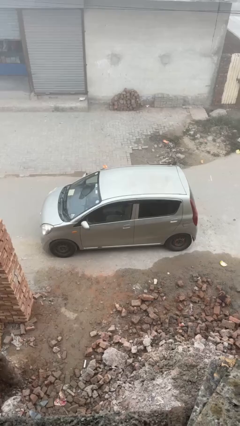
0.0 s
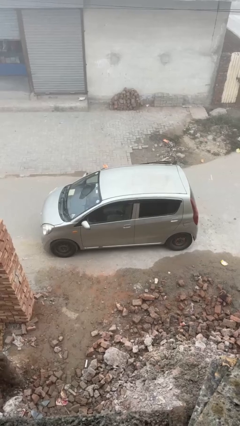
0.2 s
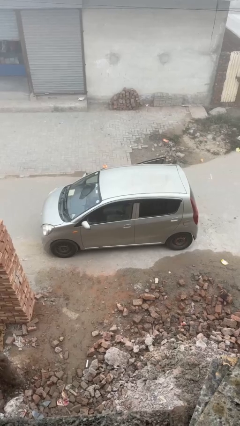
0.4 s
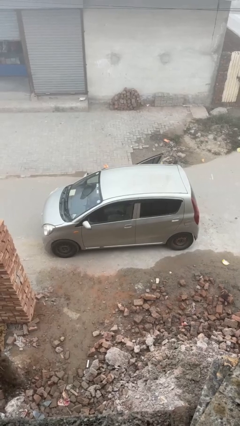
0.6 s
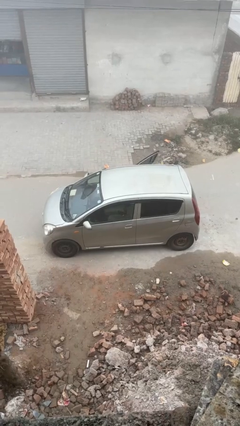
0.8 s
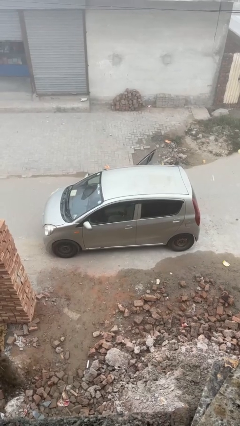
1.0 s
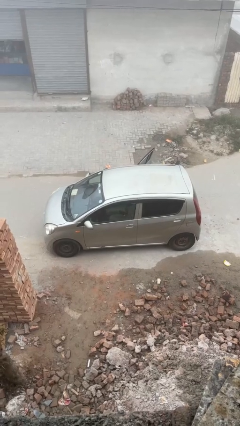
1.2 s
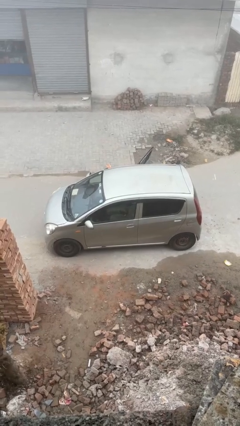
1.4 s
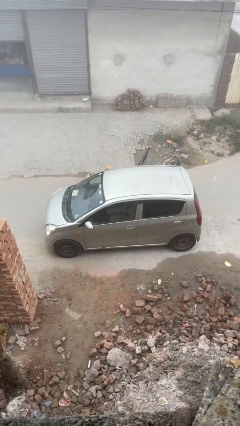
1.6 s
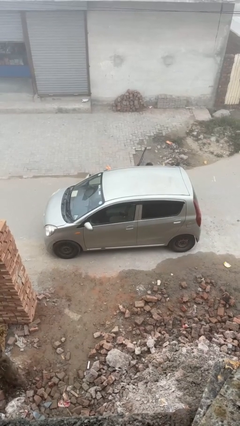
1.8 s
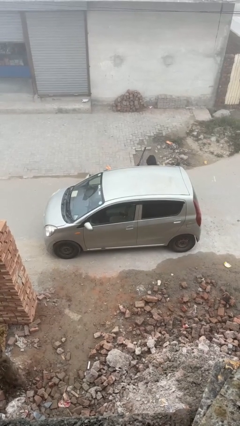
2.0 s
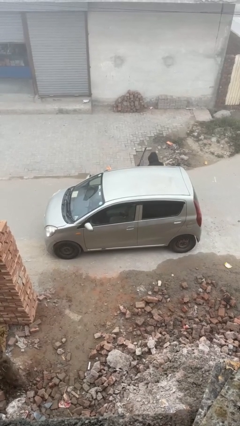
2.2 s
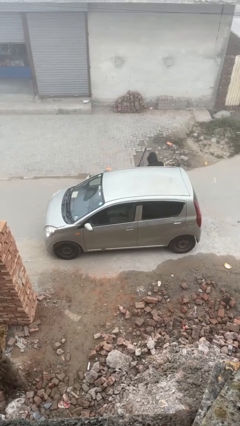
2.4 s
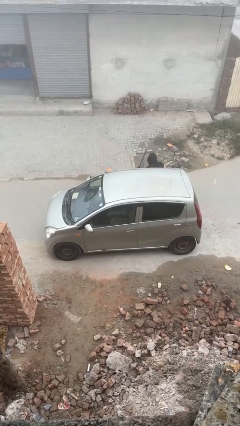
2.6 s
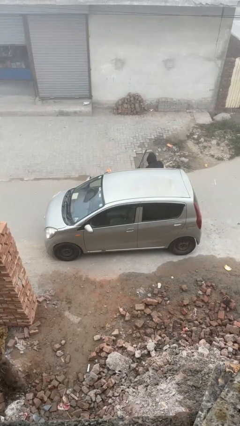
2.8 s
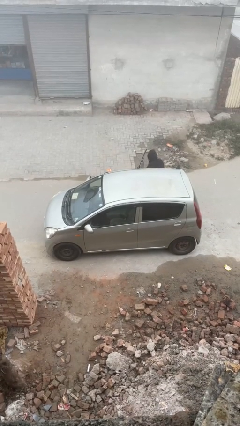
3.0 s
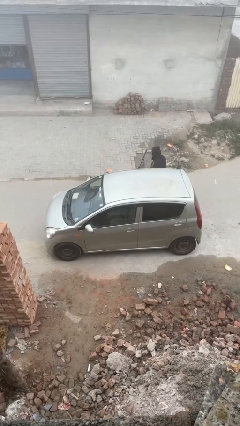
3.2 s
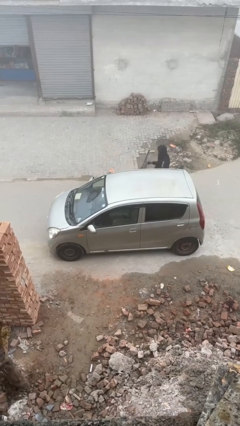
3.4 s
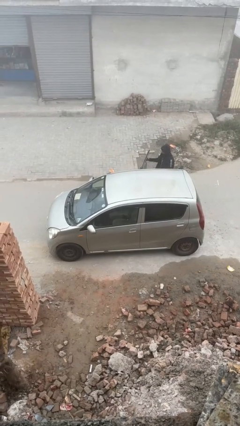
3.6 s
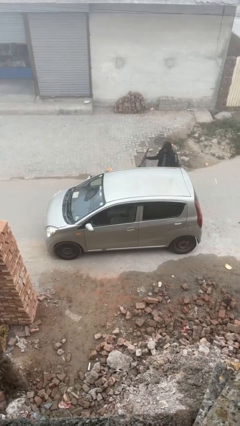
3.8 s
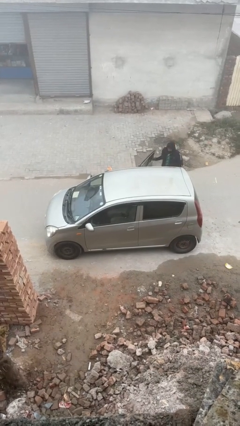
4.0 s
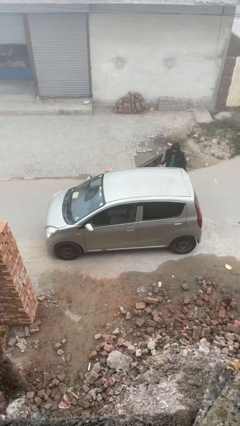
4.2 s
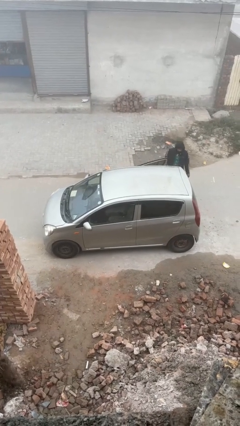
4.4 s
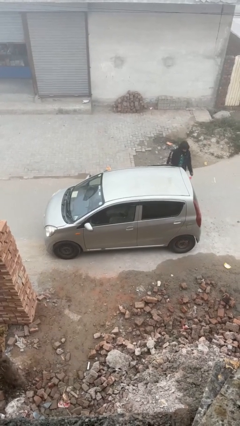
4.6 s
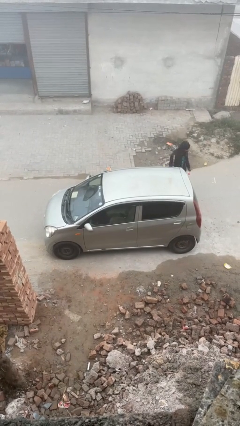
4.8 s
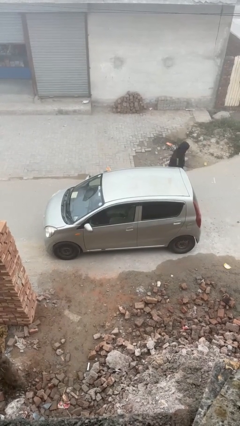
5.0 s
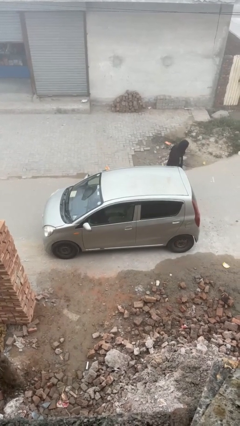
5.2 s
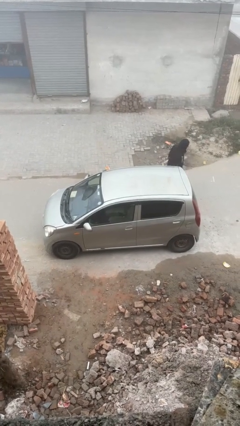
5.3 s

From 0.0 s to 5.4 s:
car drops off person

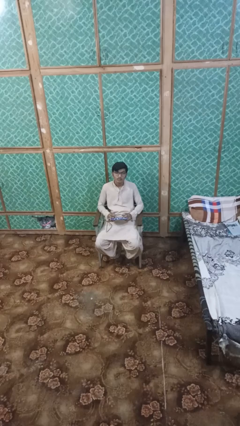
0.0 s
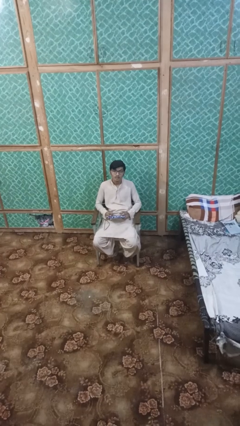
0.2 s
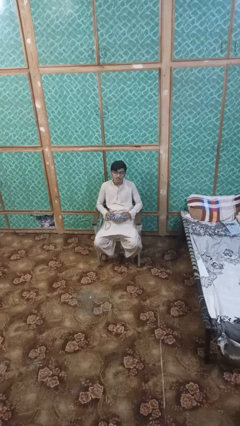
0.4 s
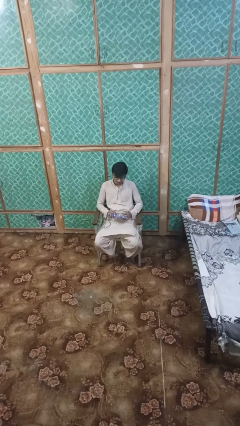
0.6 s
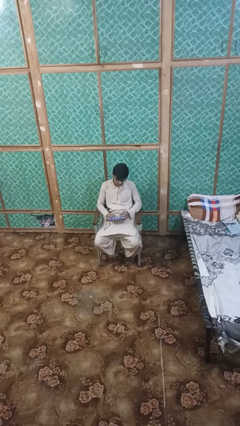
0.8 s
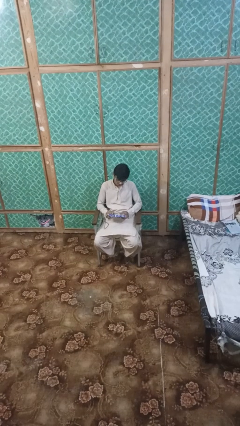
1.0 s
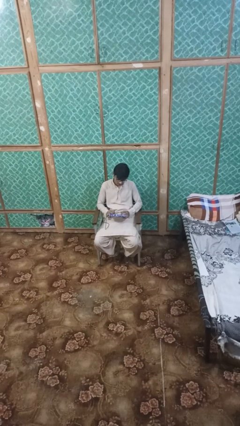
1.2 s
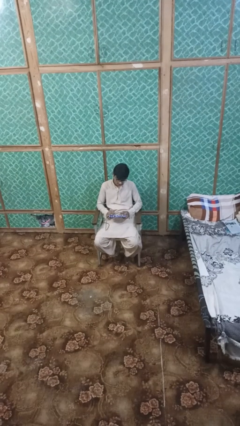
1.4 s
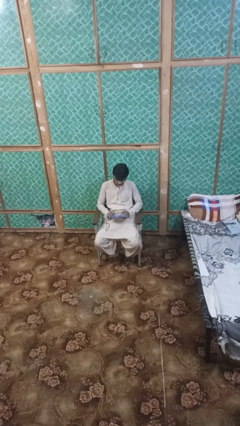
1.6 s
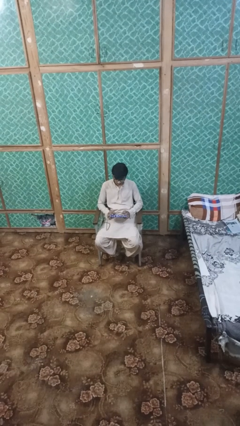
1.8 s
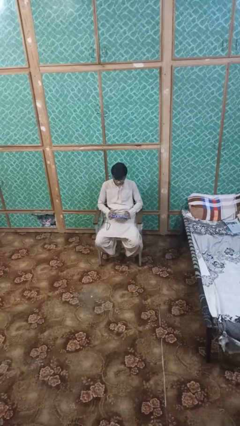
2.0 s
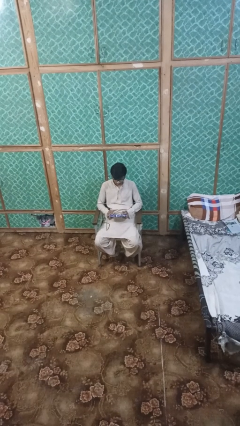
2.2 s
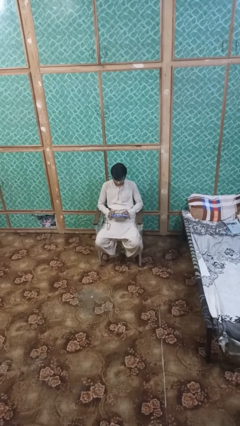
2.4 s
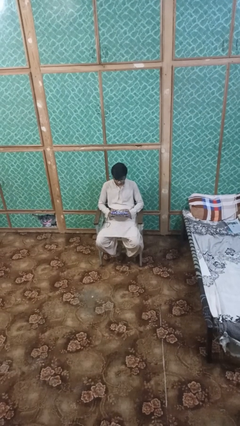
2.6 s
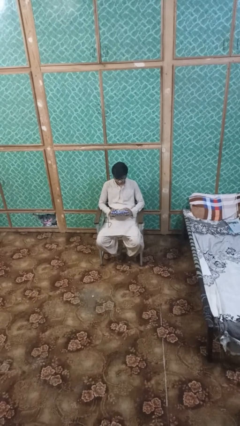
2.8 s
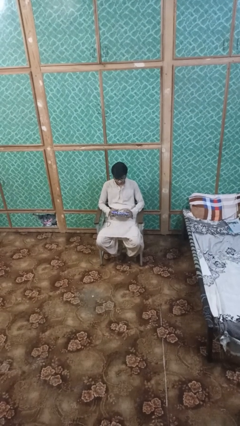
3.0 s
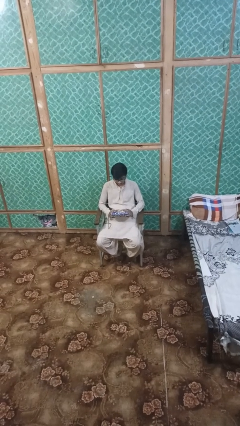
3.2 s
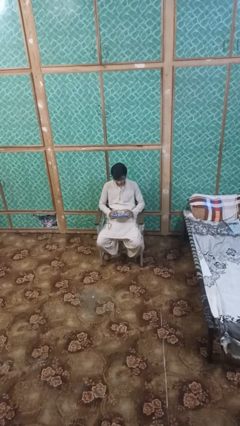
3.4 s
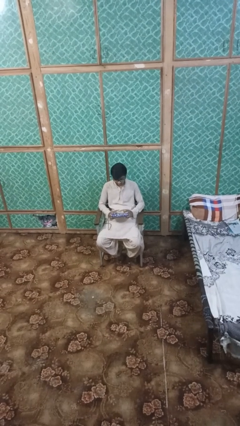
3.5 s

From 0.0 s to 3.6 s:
person interacts with handheld game

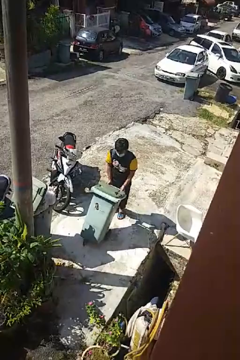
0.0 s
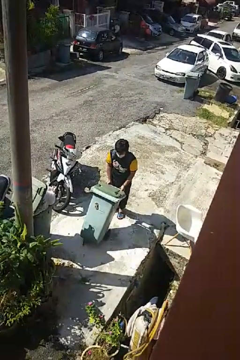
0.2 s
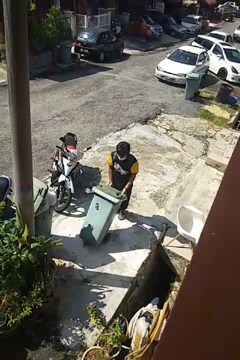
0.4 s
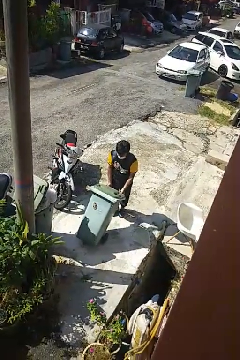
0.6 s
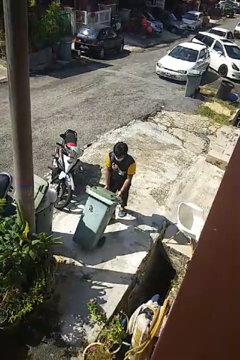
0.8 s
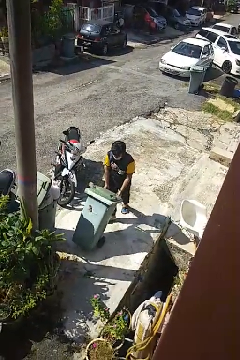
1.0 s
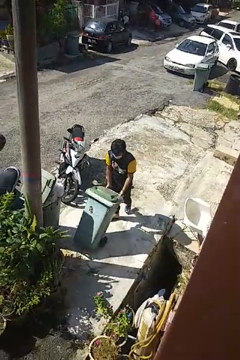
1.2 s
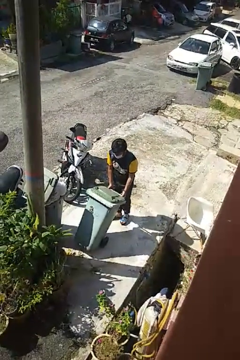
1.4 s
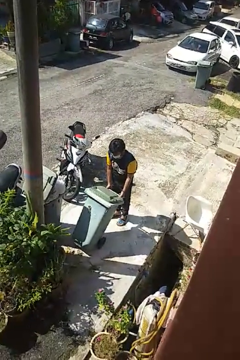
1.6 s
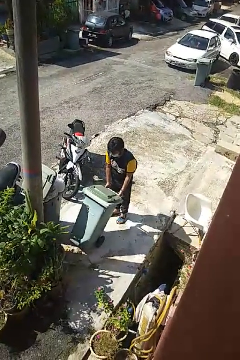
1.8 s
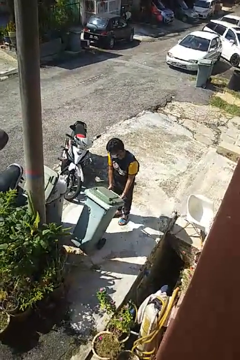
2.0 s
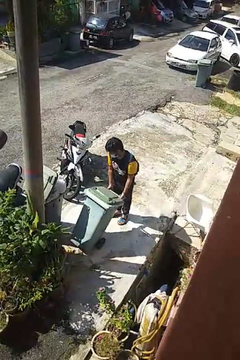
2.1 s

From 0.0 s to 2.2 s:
person pushes wheeled trashcan

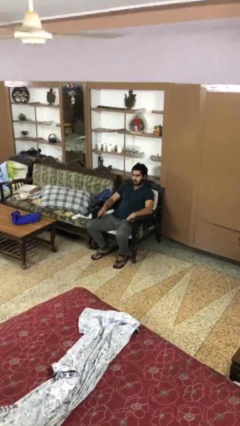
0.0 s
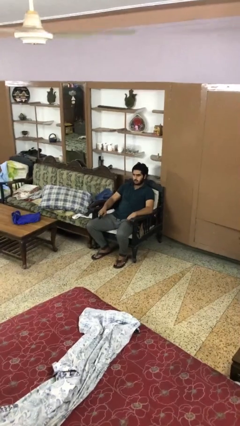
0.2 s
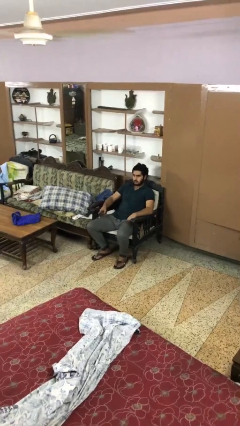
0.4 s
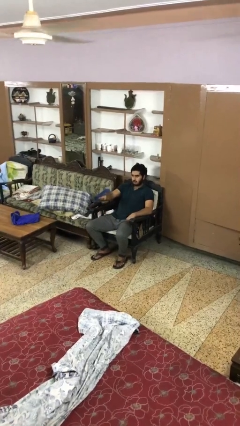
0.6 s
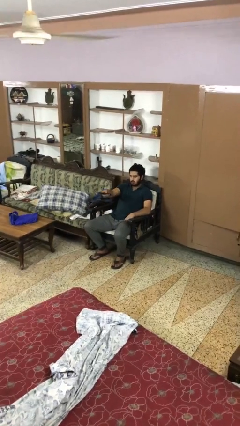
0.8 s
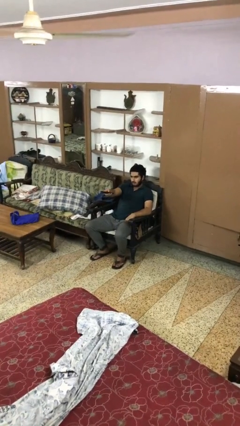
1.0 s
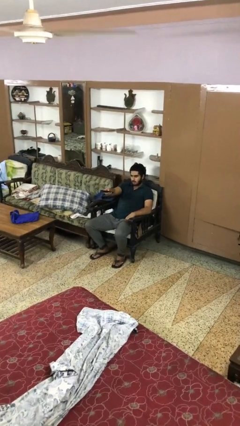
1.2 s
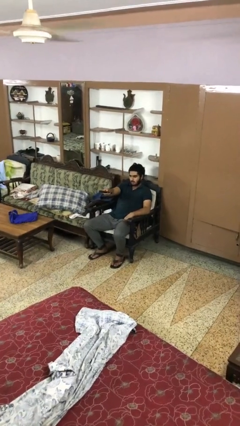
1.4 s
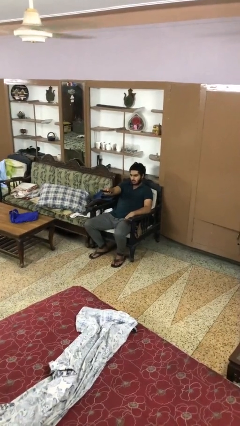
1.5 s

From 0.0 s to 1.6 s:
person uses television remote

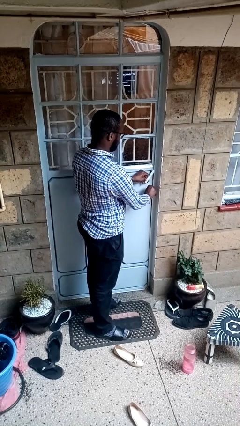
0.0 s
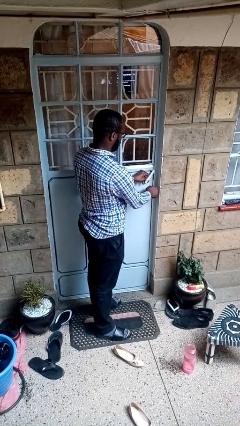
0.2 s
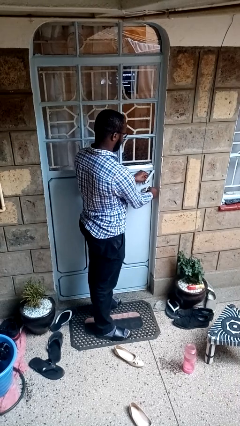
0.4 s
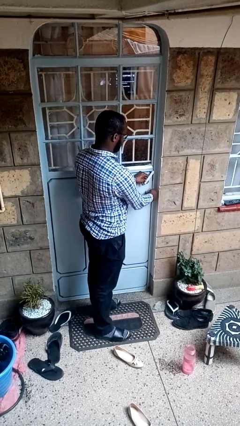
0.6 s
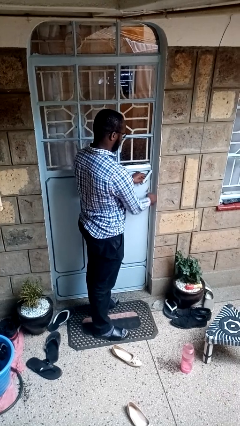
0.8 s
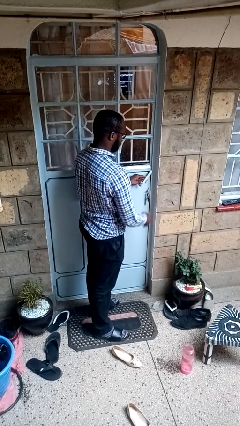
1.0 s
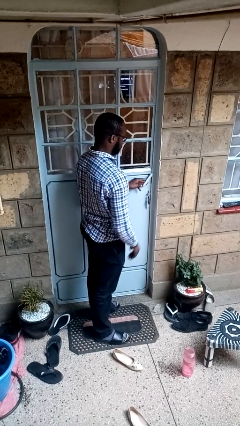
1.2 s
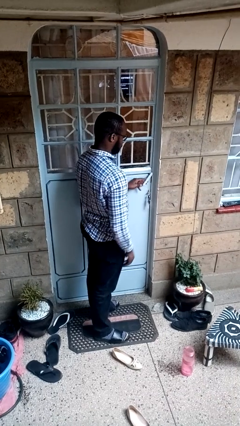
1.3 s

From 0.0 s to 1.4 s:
person locks door with keys

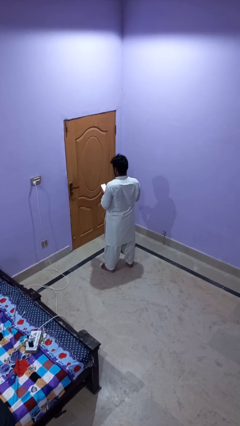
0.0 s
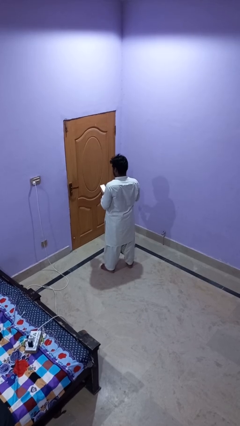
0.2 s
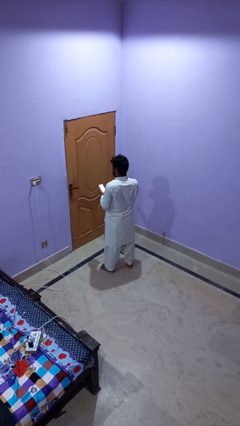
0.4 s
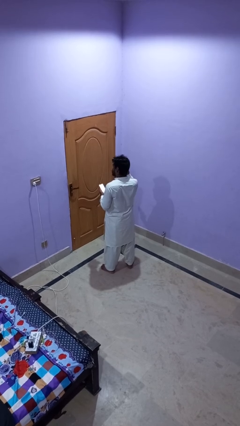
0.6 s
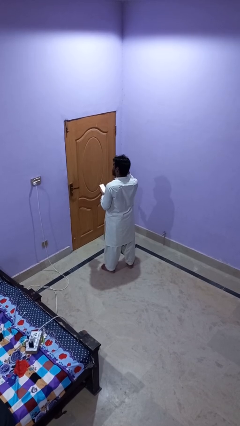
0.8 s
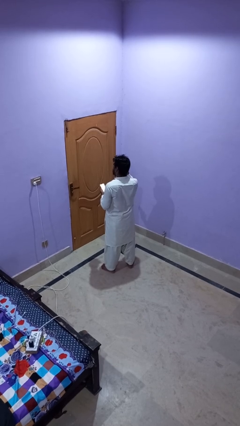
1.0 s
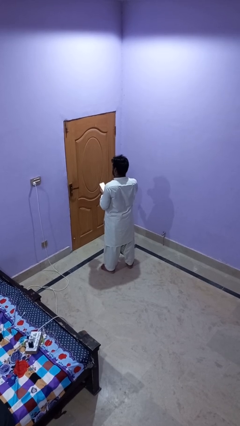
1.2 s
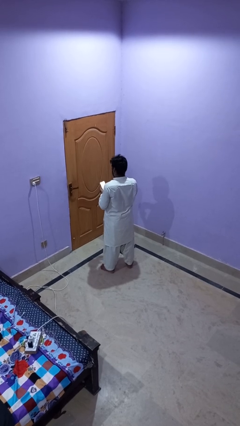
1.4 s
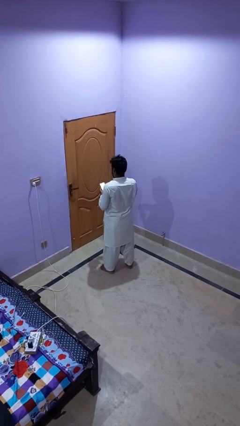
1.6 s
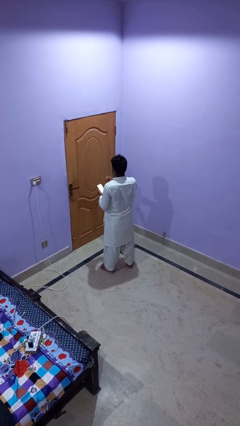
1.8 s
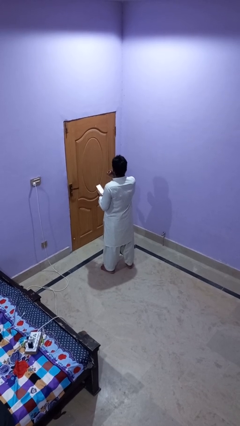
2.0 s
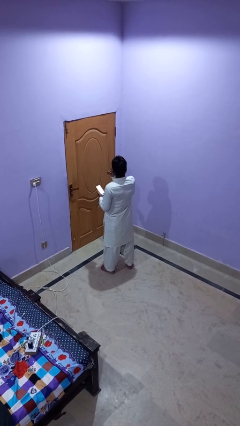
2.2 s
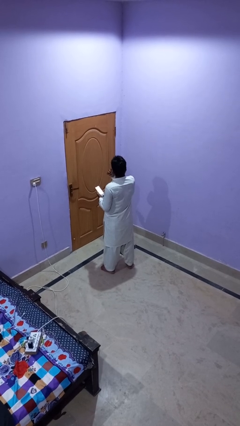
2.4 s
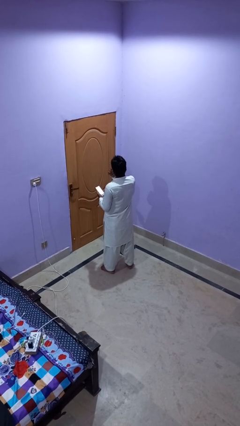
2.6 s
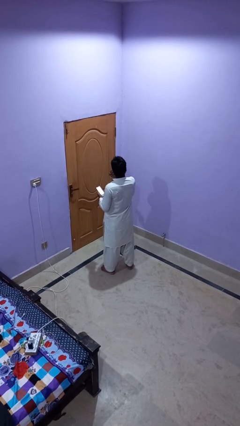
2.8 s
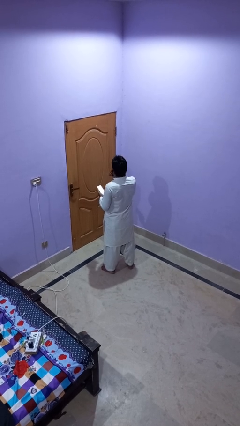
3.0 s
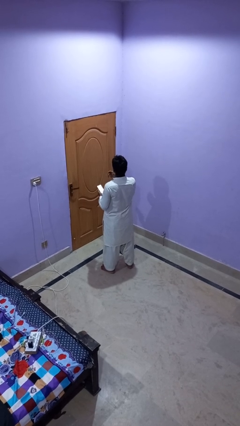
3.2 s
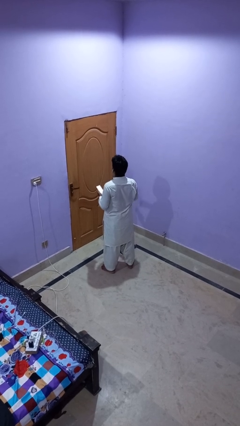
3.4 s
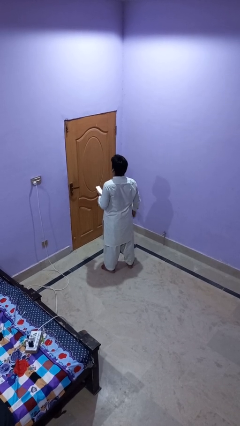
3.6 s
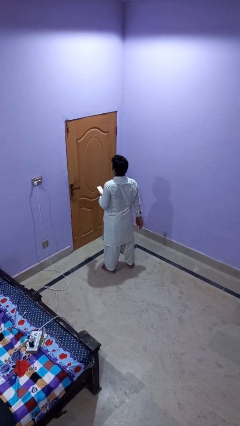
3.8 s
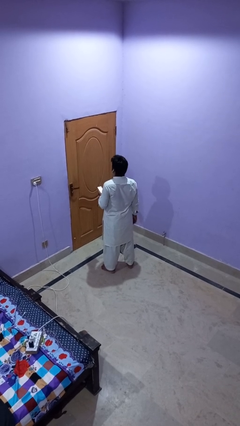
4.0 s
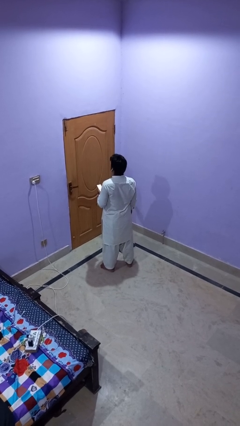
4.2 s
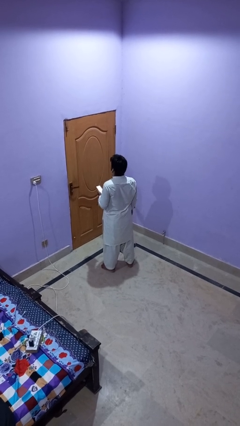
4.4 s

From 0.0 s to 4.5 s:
person puts on headphones
